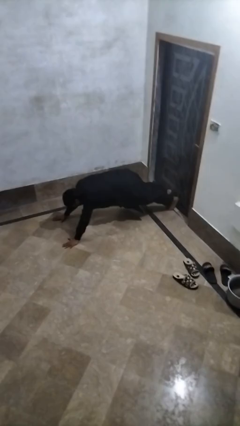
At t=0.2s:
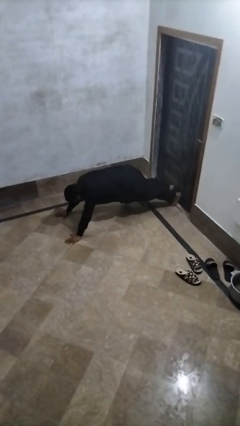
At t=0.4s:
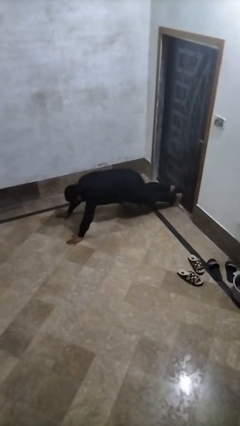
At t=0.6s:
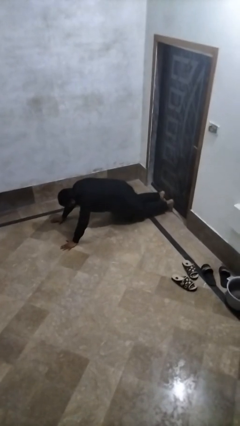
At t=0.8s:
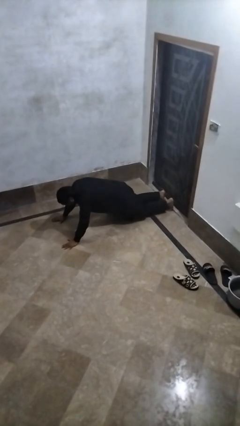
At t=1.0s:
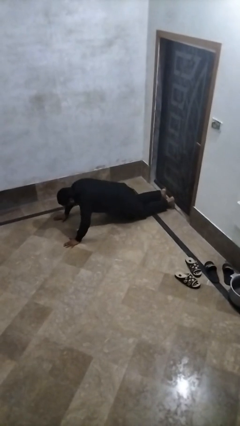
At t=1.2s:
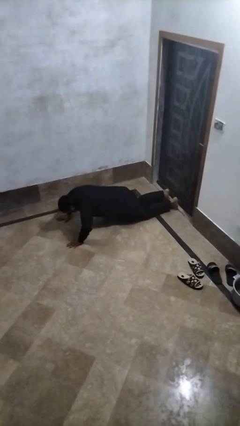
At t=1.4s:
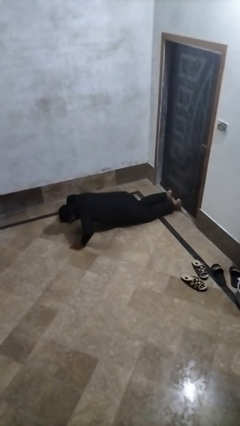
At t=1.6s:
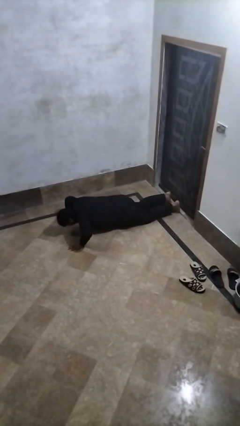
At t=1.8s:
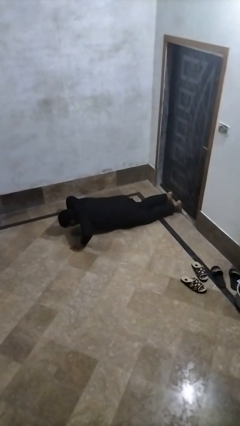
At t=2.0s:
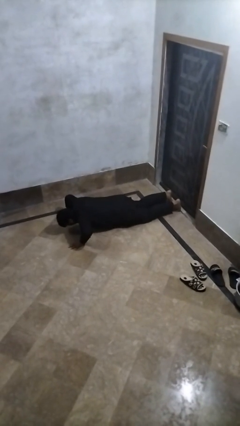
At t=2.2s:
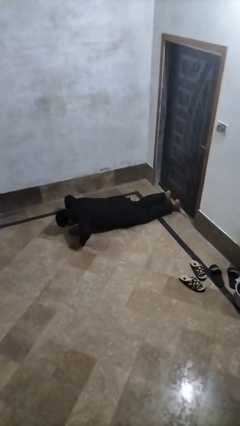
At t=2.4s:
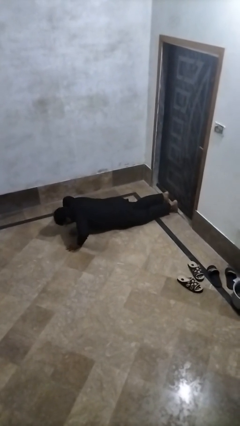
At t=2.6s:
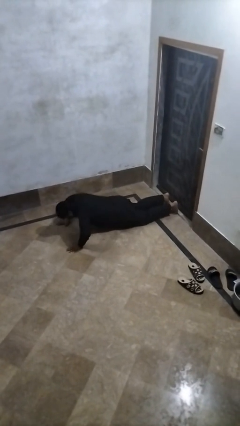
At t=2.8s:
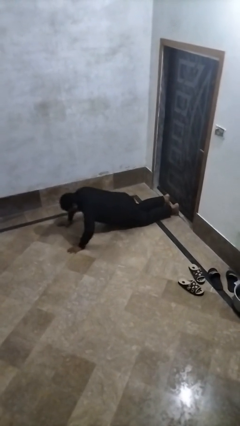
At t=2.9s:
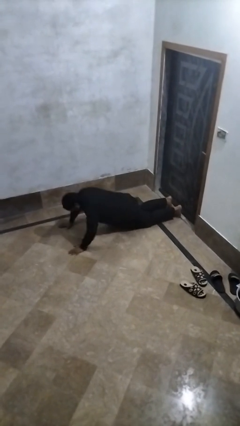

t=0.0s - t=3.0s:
person exercises with pushup

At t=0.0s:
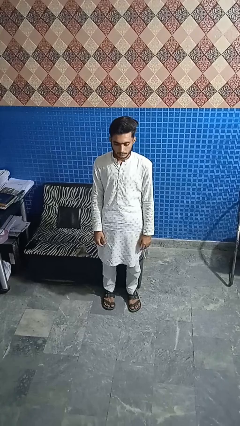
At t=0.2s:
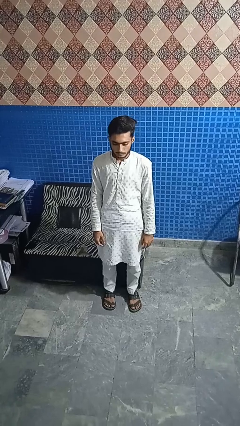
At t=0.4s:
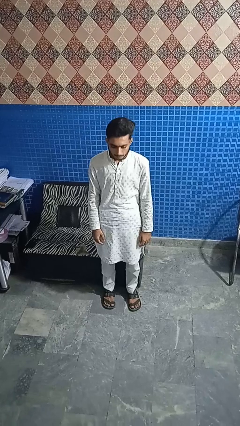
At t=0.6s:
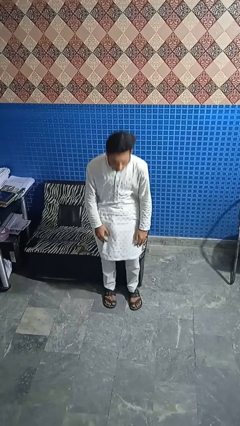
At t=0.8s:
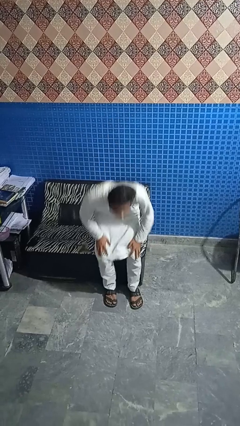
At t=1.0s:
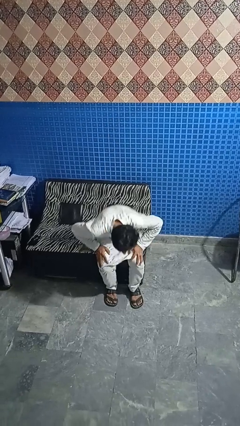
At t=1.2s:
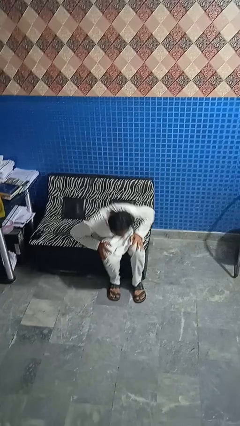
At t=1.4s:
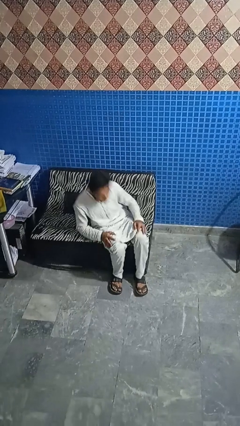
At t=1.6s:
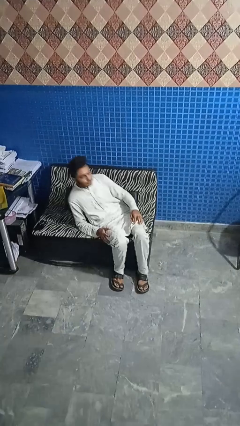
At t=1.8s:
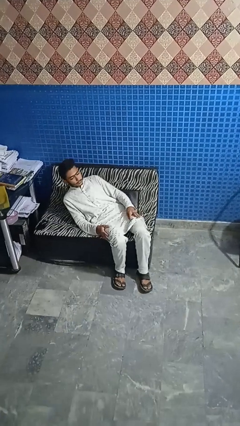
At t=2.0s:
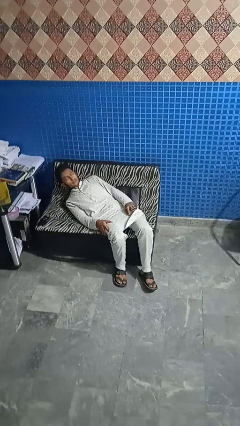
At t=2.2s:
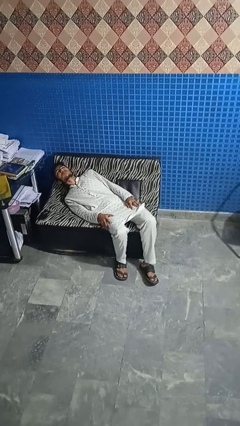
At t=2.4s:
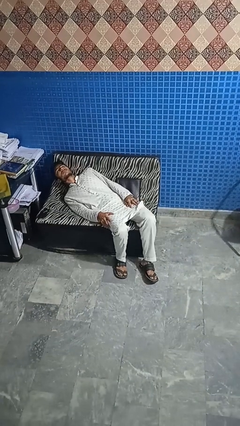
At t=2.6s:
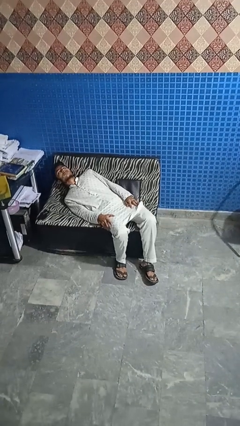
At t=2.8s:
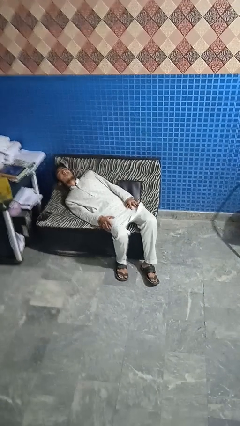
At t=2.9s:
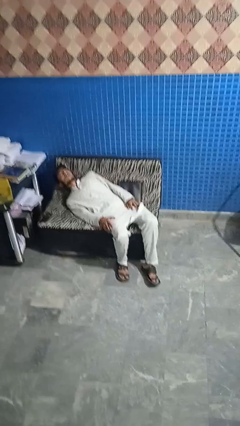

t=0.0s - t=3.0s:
person lies down on couch

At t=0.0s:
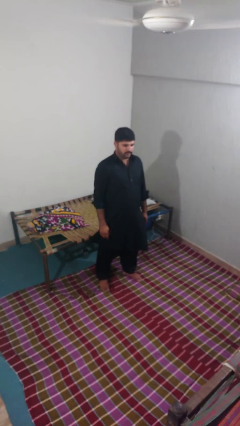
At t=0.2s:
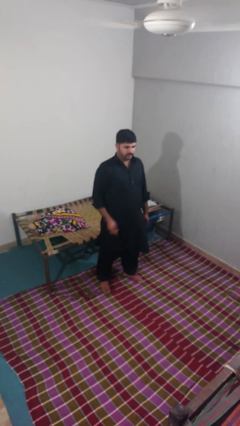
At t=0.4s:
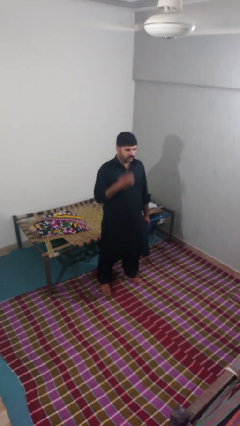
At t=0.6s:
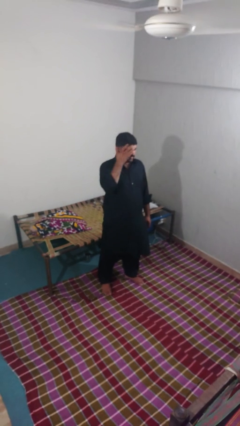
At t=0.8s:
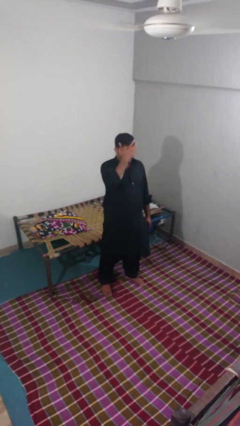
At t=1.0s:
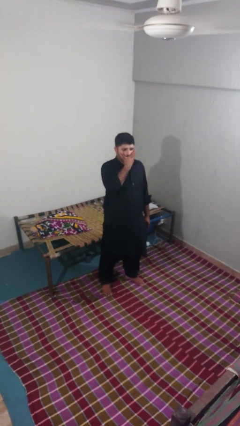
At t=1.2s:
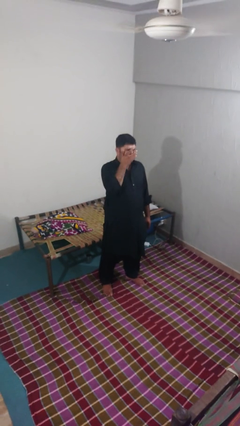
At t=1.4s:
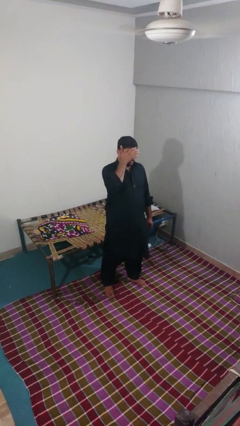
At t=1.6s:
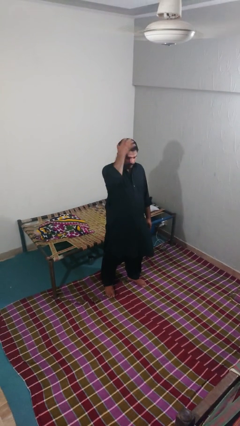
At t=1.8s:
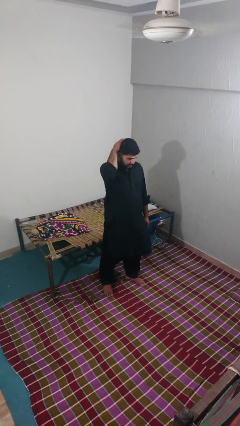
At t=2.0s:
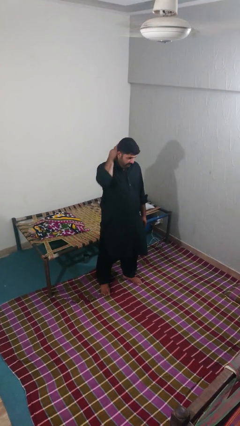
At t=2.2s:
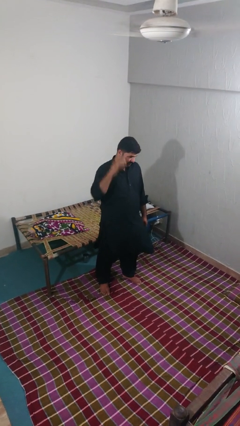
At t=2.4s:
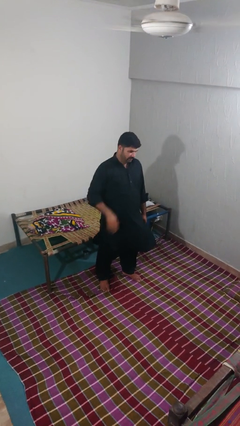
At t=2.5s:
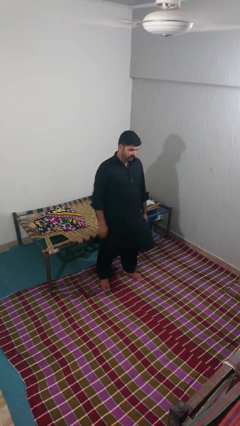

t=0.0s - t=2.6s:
person scratches face

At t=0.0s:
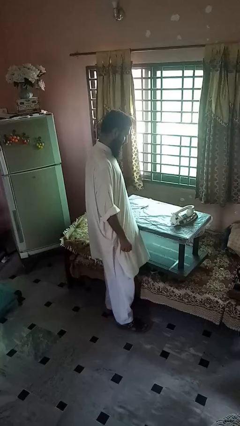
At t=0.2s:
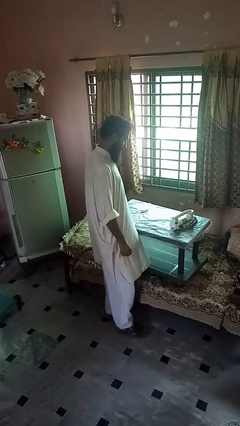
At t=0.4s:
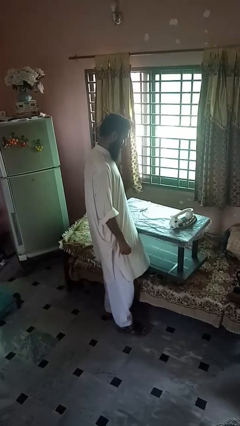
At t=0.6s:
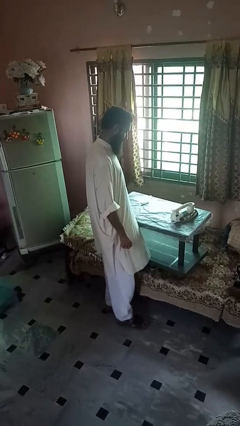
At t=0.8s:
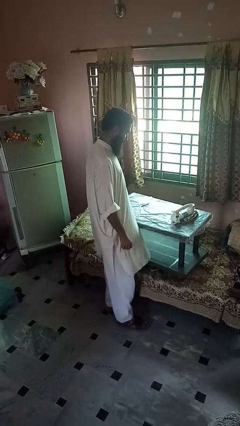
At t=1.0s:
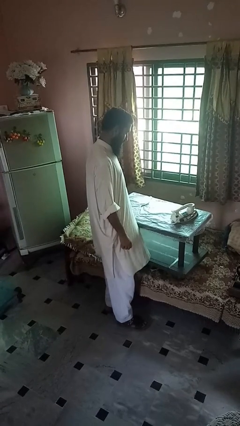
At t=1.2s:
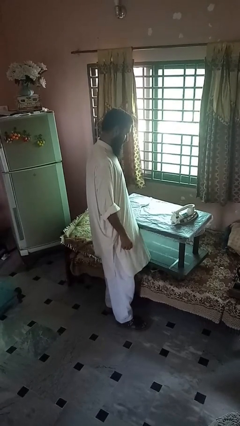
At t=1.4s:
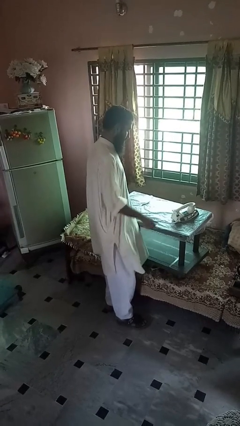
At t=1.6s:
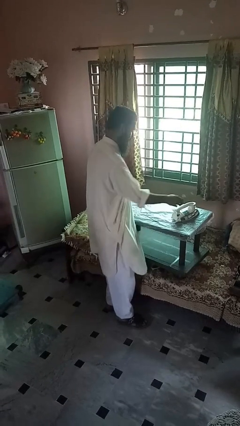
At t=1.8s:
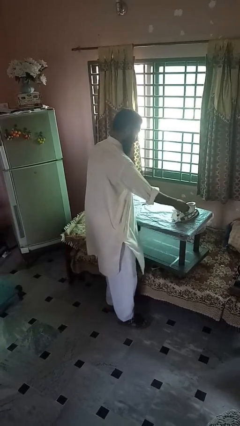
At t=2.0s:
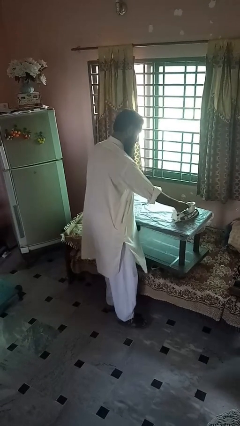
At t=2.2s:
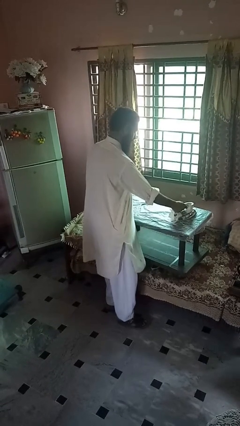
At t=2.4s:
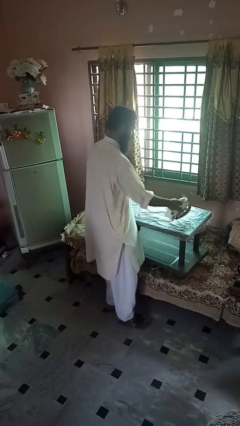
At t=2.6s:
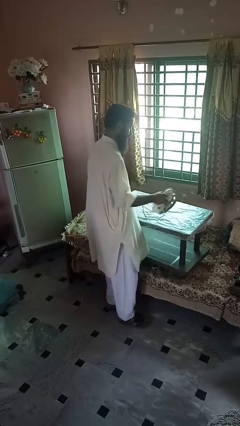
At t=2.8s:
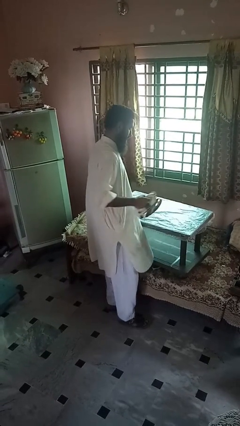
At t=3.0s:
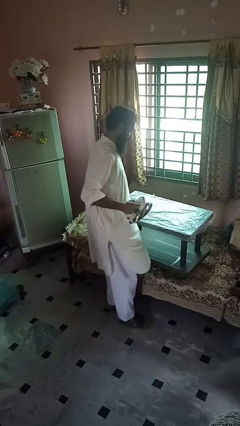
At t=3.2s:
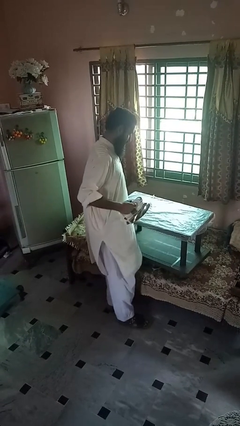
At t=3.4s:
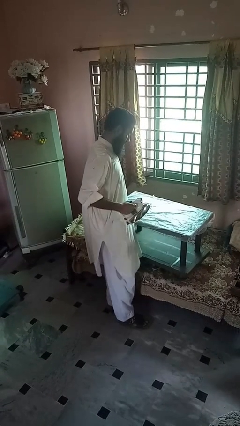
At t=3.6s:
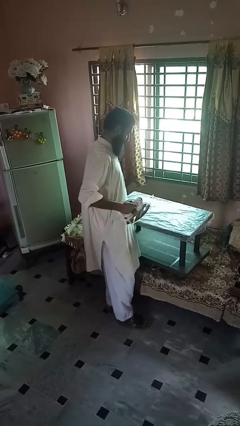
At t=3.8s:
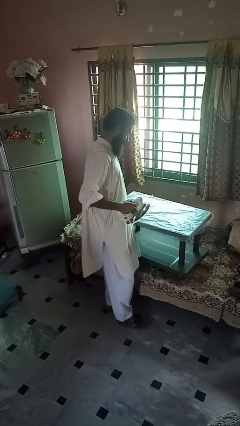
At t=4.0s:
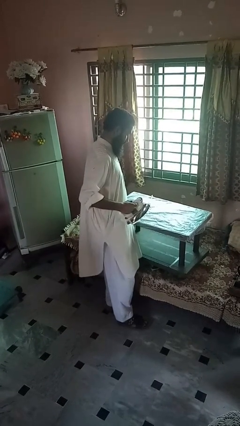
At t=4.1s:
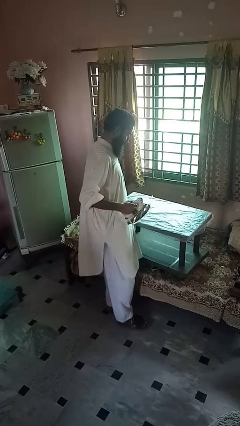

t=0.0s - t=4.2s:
person picks up object from countertop

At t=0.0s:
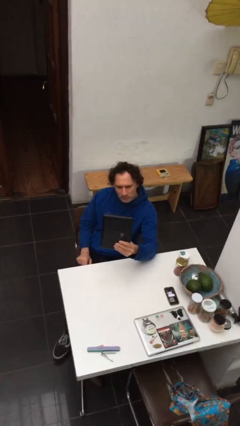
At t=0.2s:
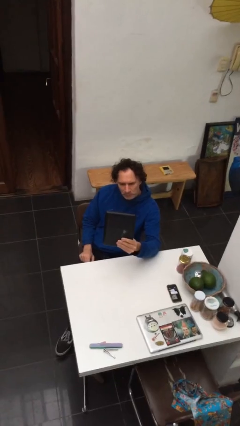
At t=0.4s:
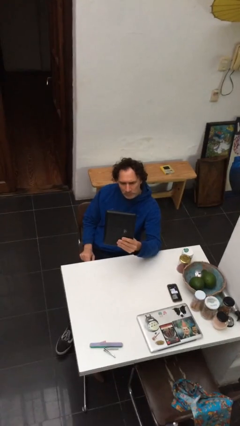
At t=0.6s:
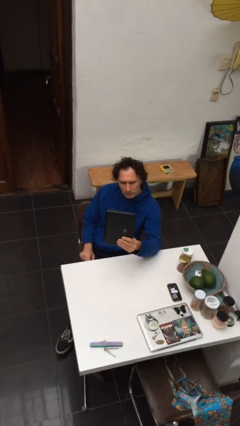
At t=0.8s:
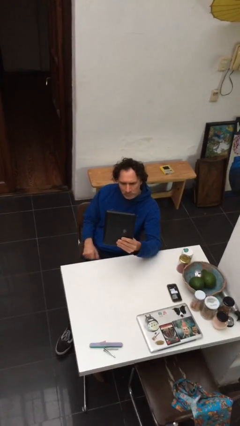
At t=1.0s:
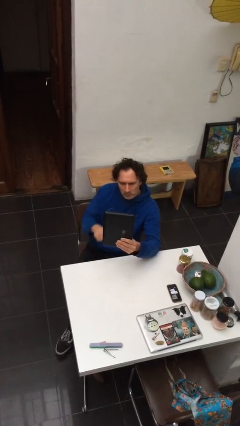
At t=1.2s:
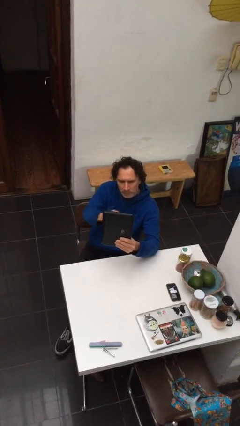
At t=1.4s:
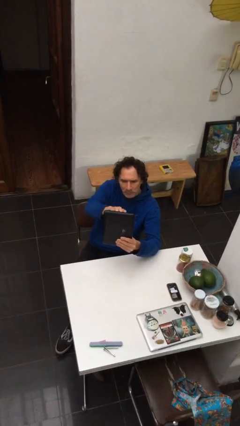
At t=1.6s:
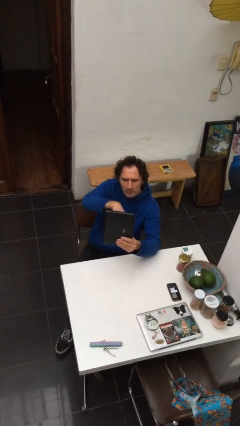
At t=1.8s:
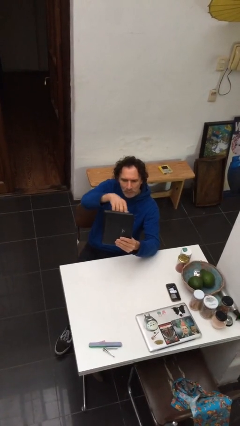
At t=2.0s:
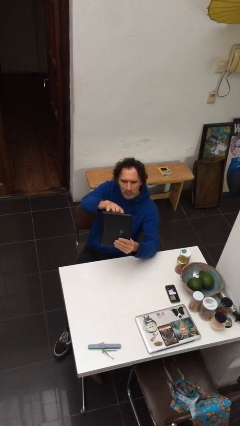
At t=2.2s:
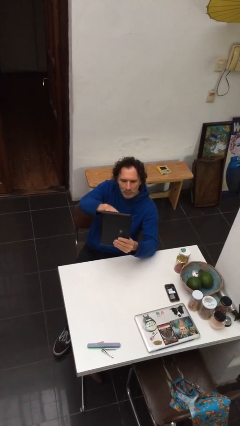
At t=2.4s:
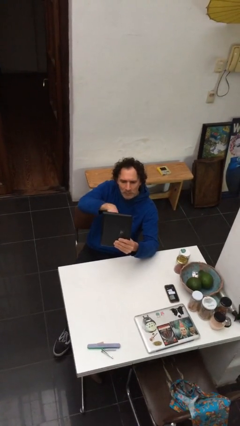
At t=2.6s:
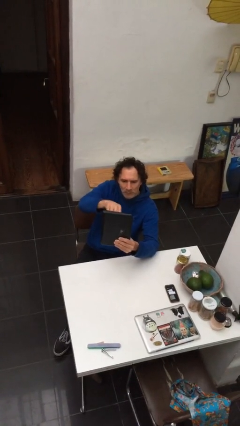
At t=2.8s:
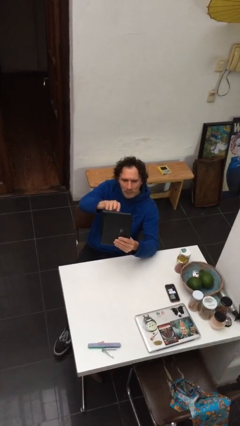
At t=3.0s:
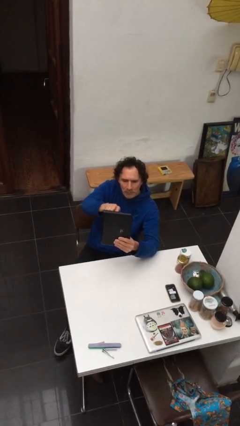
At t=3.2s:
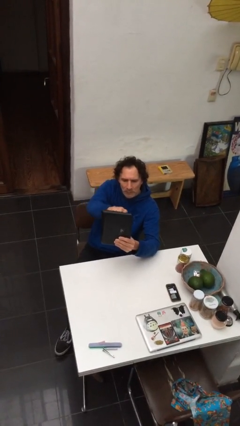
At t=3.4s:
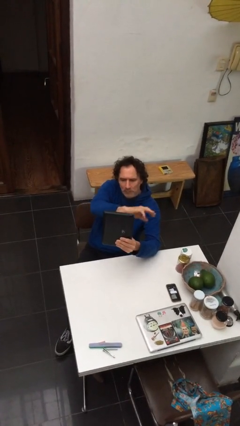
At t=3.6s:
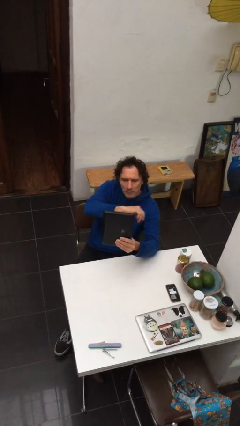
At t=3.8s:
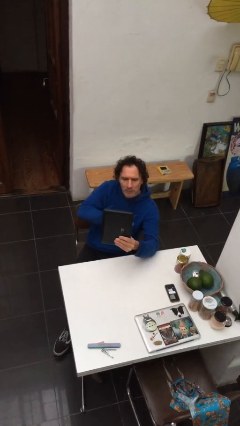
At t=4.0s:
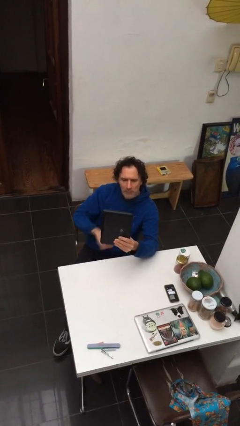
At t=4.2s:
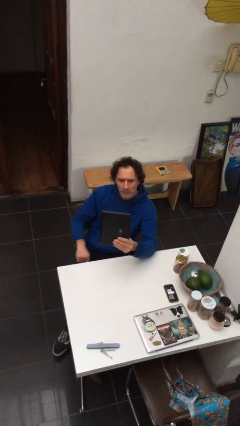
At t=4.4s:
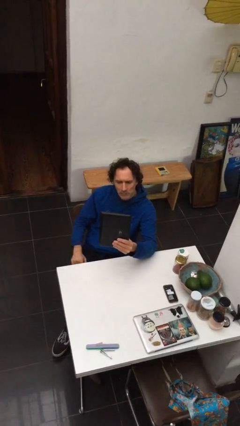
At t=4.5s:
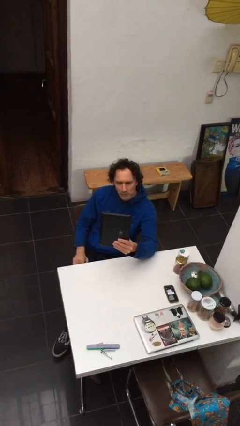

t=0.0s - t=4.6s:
person interacts with tablet
